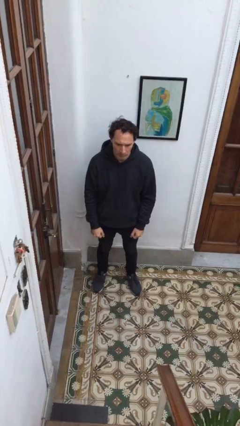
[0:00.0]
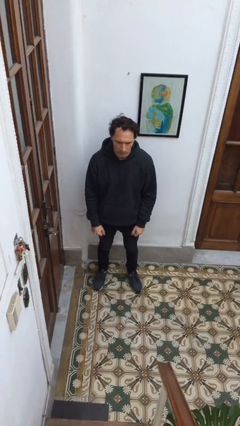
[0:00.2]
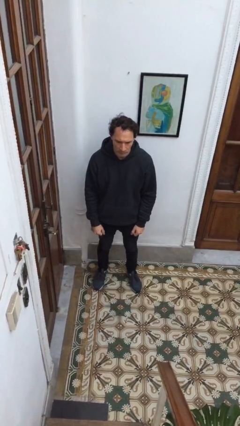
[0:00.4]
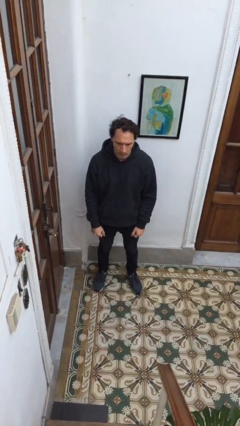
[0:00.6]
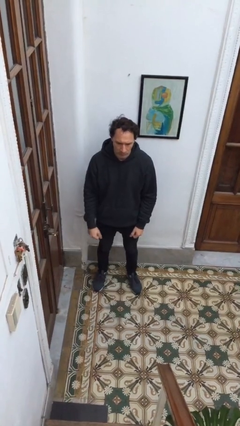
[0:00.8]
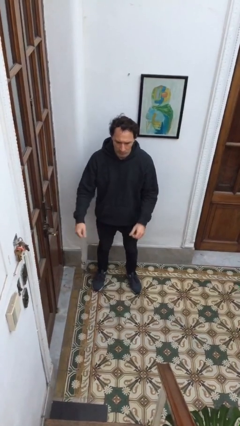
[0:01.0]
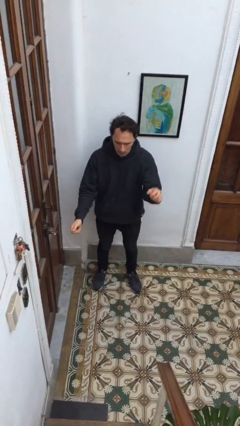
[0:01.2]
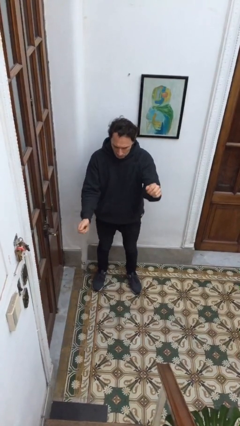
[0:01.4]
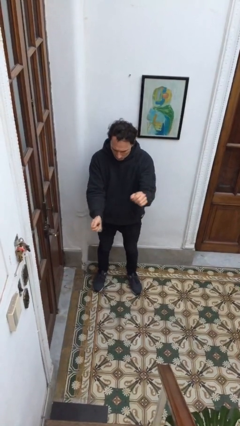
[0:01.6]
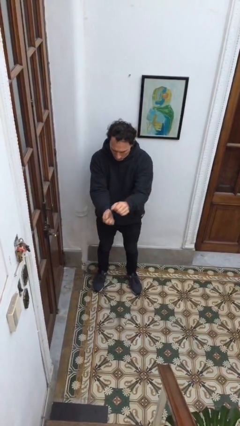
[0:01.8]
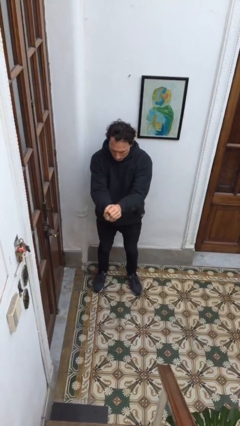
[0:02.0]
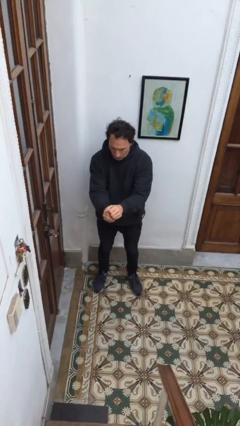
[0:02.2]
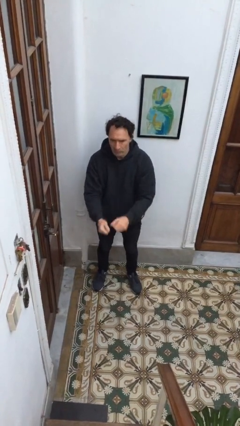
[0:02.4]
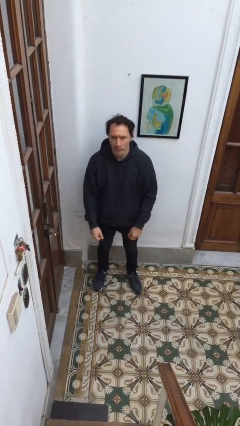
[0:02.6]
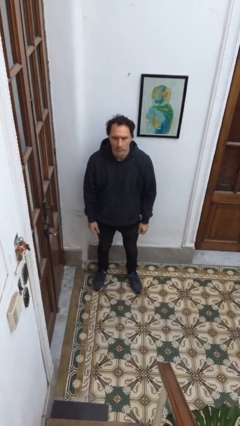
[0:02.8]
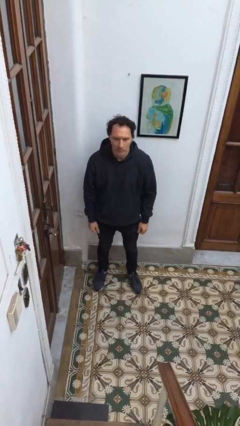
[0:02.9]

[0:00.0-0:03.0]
person gestures zoom out

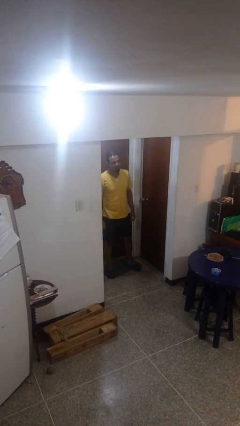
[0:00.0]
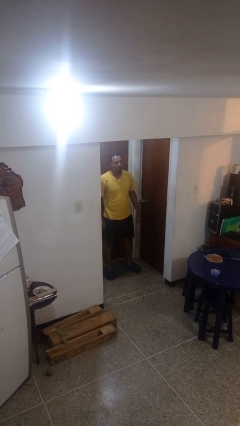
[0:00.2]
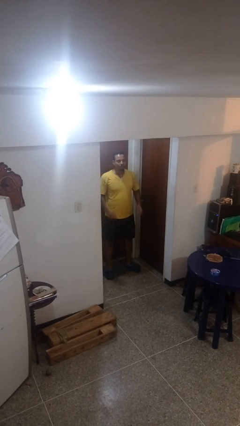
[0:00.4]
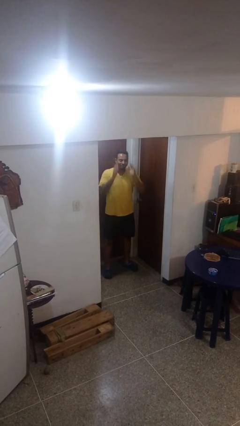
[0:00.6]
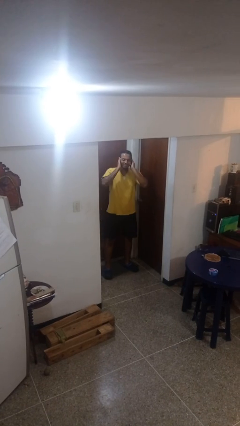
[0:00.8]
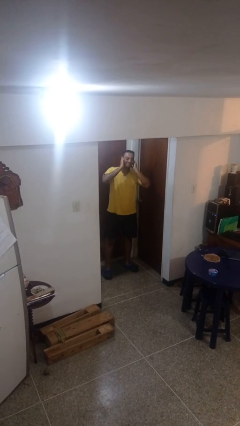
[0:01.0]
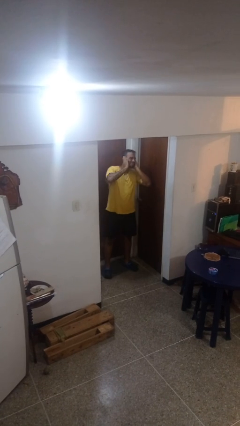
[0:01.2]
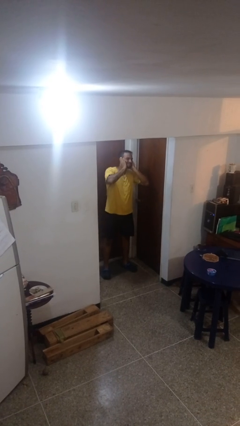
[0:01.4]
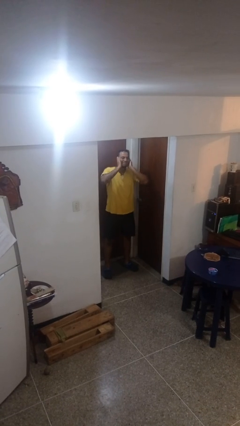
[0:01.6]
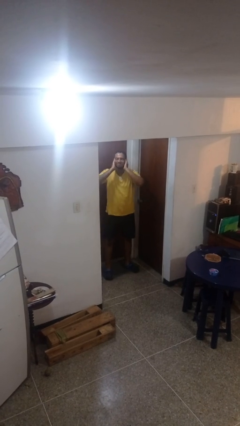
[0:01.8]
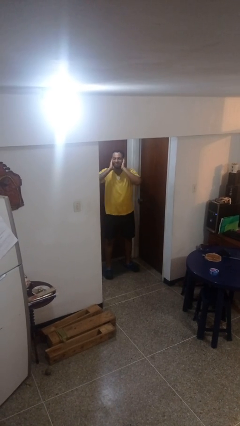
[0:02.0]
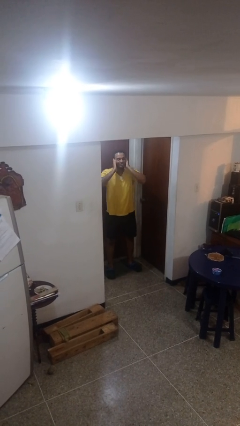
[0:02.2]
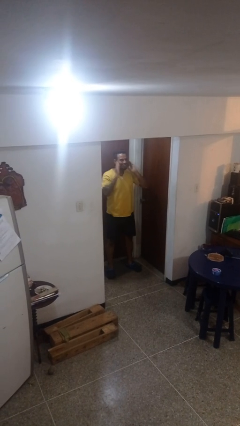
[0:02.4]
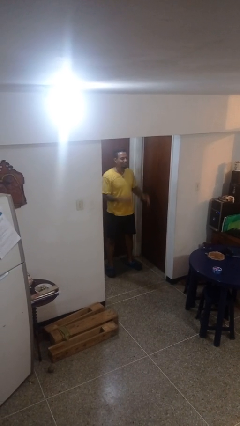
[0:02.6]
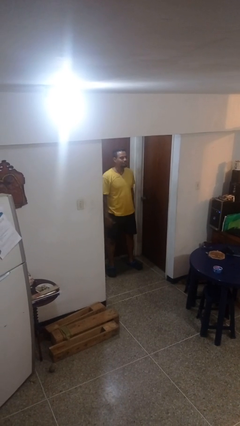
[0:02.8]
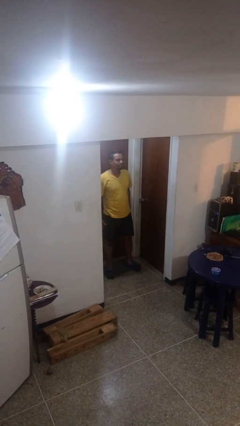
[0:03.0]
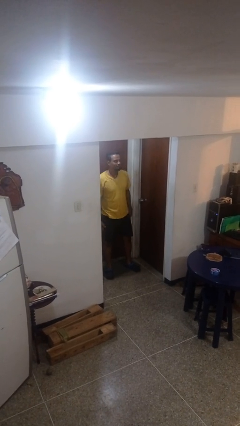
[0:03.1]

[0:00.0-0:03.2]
person puts fingers in ear

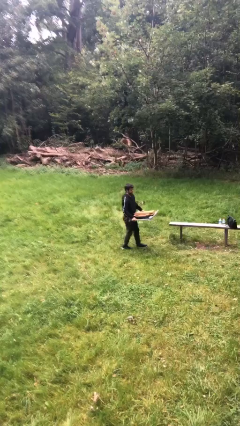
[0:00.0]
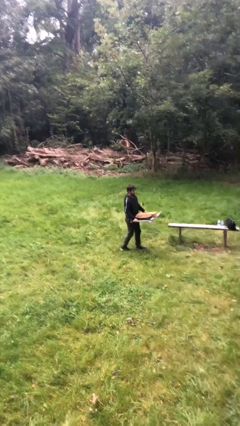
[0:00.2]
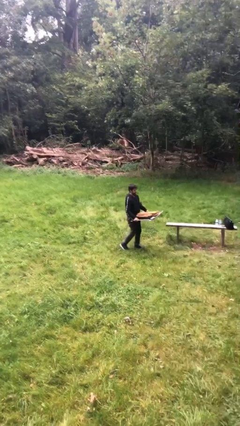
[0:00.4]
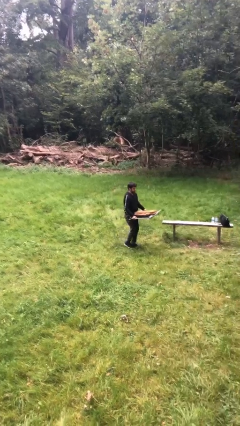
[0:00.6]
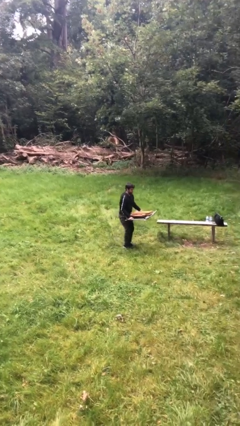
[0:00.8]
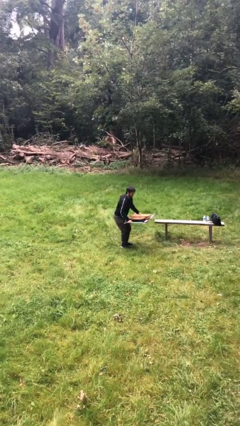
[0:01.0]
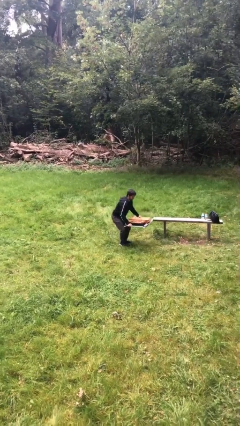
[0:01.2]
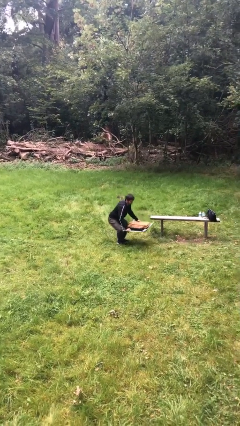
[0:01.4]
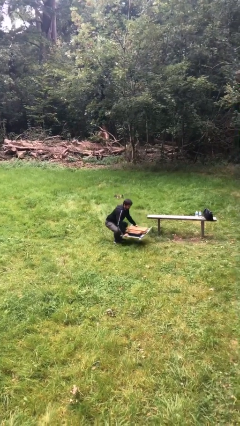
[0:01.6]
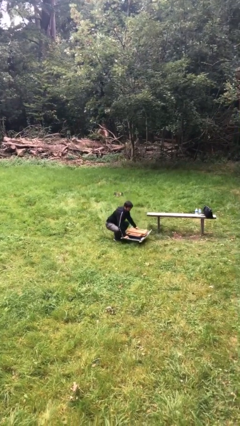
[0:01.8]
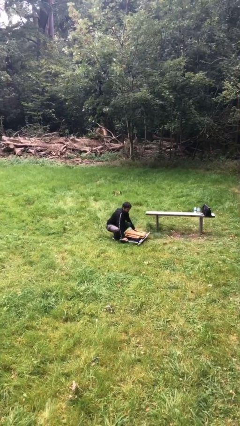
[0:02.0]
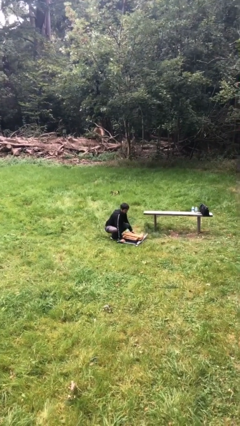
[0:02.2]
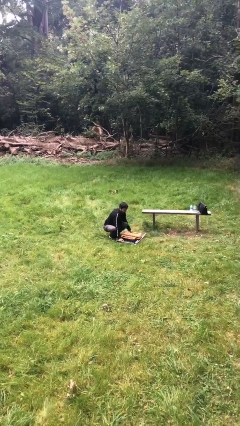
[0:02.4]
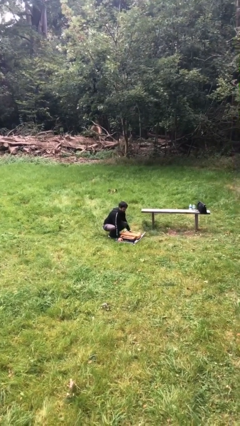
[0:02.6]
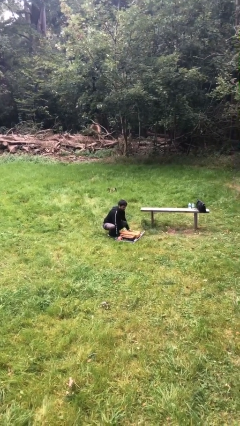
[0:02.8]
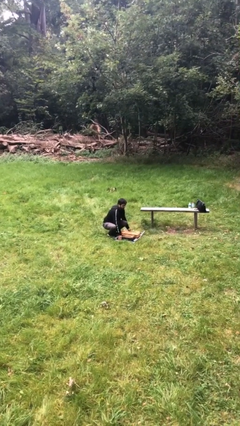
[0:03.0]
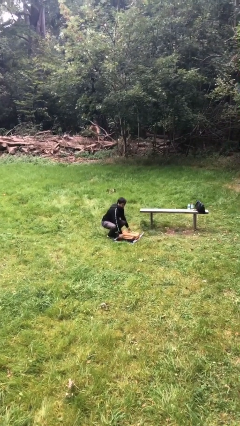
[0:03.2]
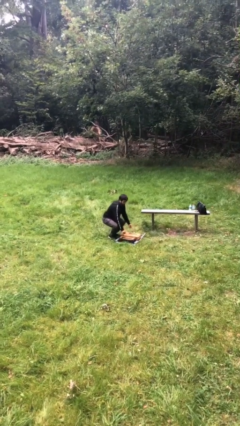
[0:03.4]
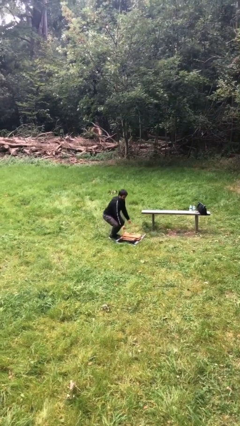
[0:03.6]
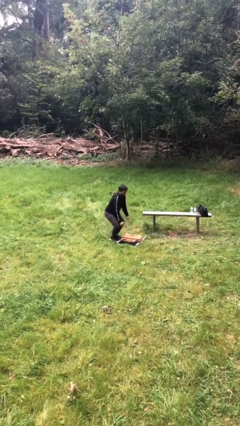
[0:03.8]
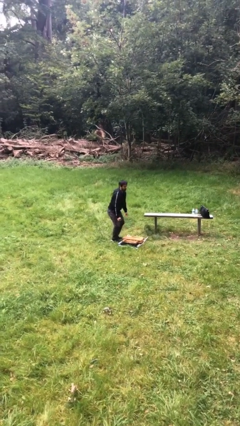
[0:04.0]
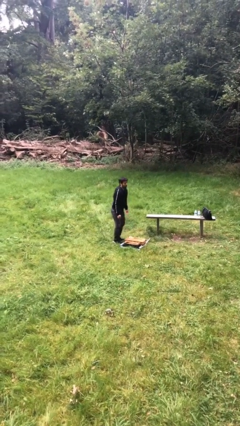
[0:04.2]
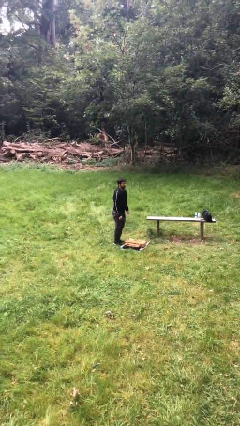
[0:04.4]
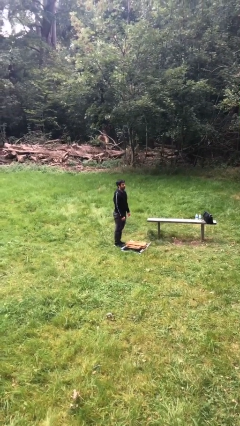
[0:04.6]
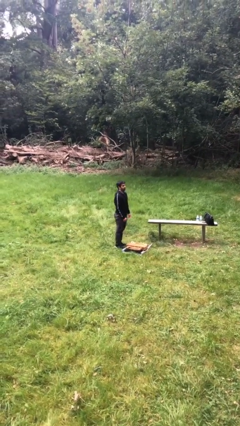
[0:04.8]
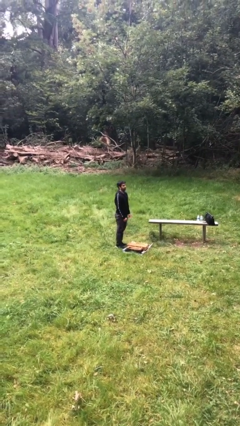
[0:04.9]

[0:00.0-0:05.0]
person puts down object on floor

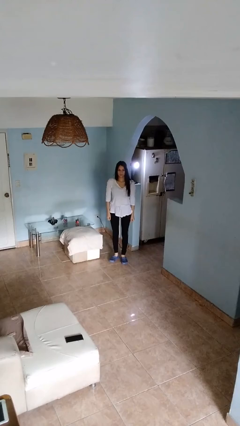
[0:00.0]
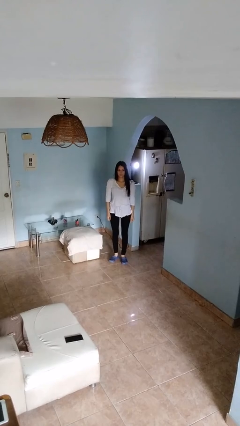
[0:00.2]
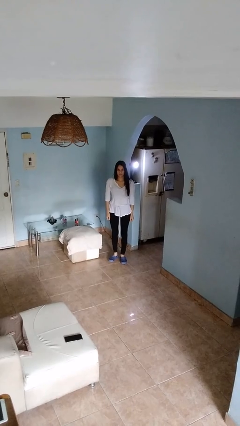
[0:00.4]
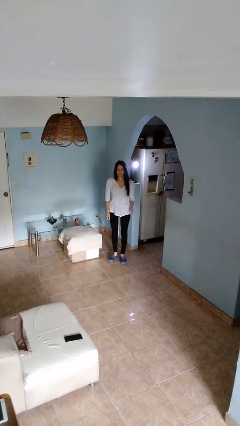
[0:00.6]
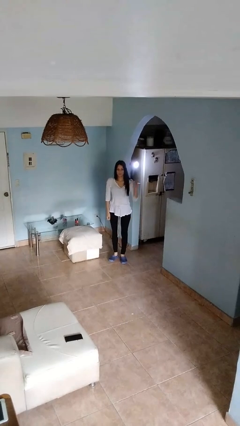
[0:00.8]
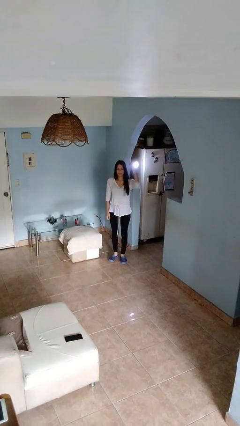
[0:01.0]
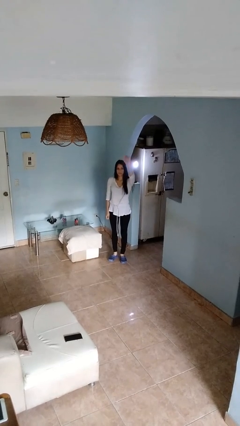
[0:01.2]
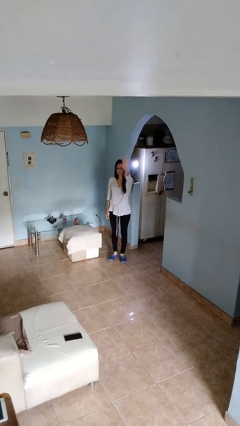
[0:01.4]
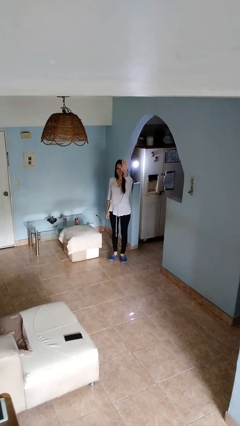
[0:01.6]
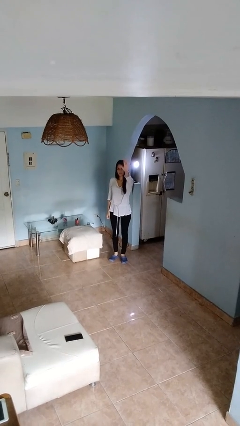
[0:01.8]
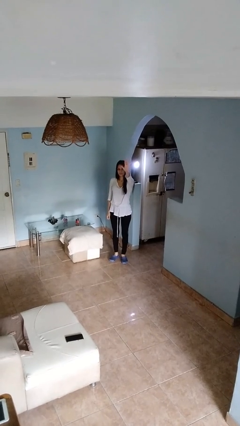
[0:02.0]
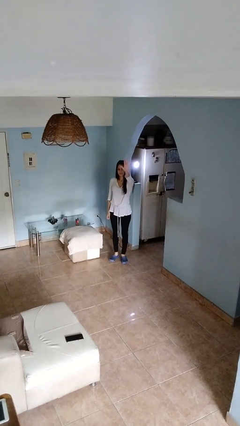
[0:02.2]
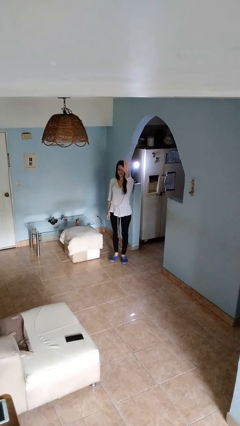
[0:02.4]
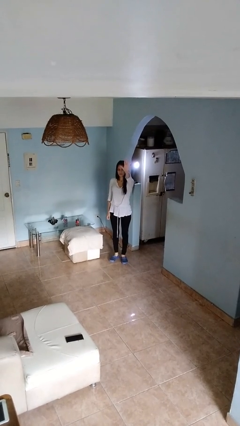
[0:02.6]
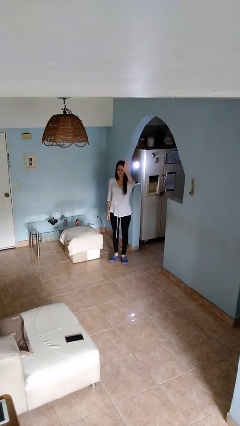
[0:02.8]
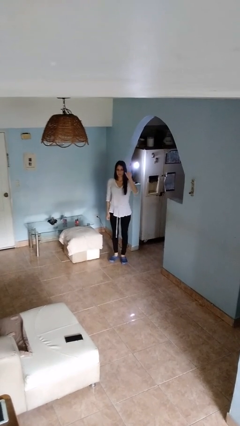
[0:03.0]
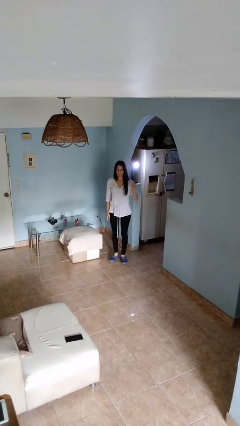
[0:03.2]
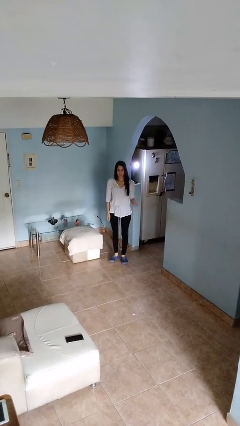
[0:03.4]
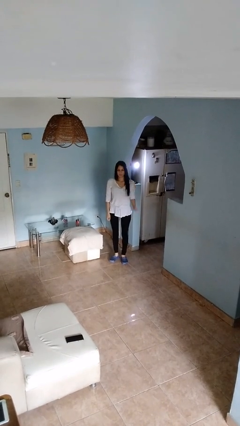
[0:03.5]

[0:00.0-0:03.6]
person gestures number five

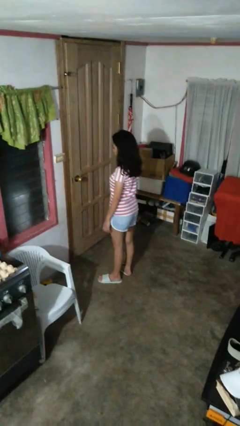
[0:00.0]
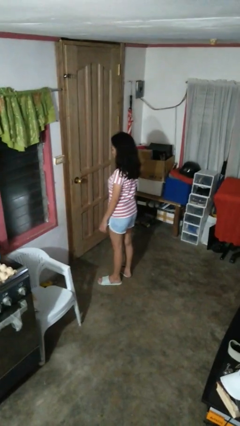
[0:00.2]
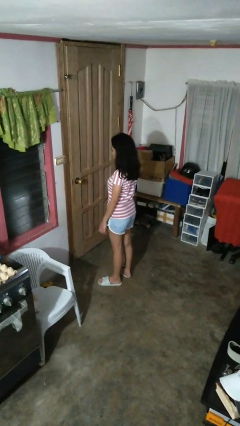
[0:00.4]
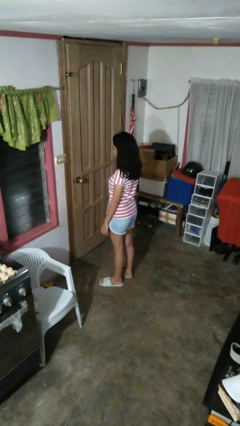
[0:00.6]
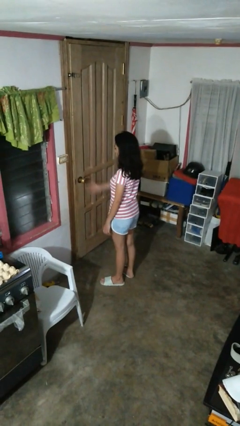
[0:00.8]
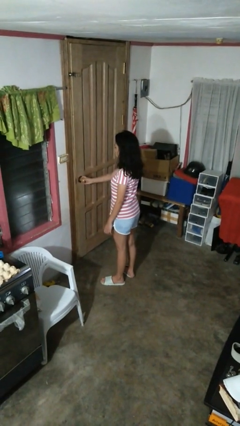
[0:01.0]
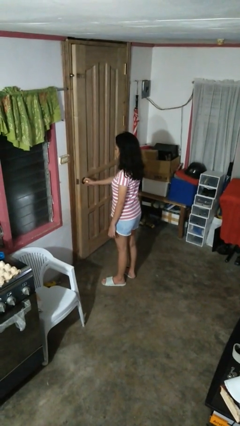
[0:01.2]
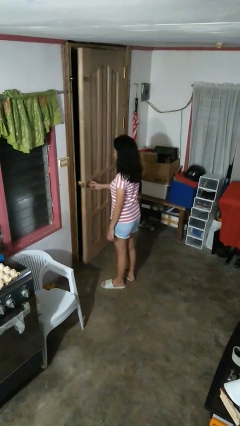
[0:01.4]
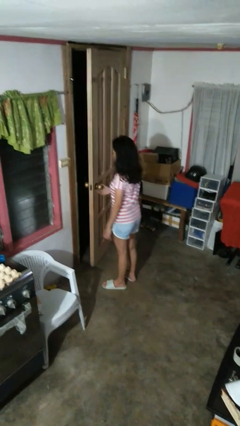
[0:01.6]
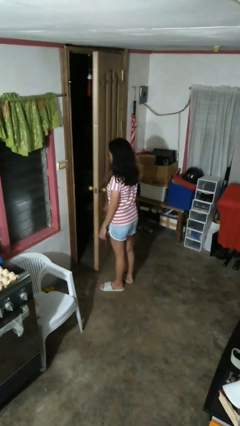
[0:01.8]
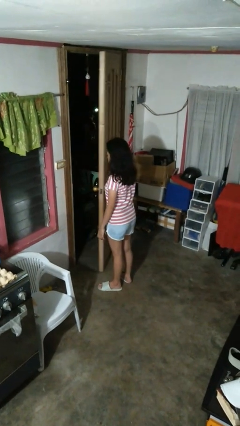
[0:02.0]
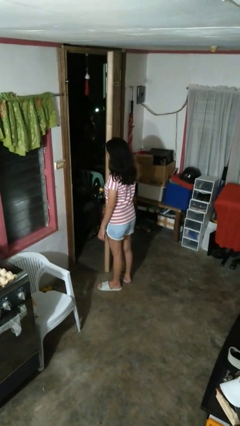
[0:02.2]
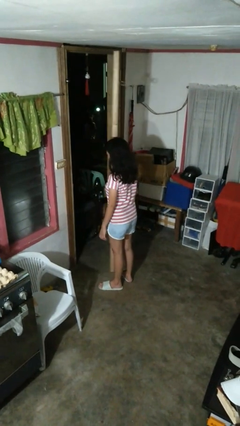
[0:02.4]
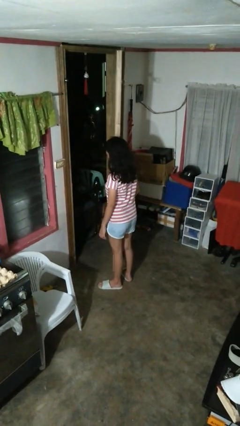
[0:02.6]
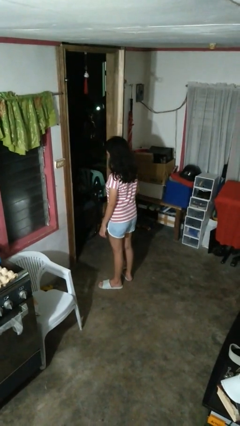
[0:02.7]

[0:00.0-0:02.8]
person opens facility door

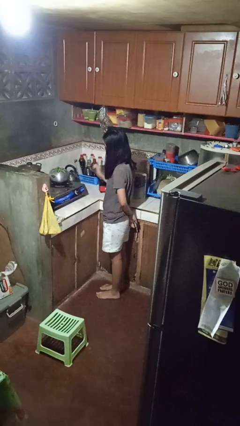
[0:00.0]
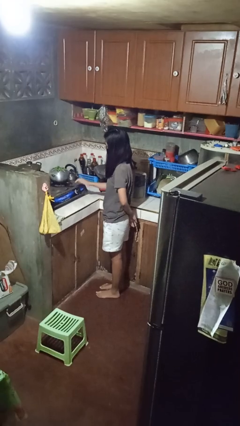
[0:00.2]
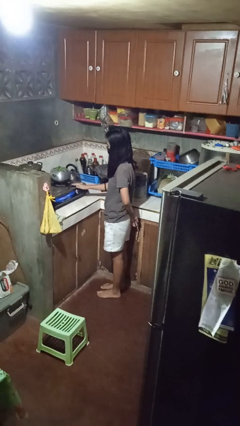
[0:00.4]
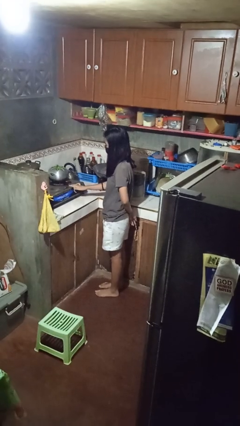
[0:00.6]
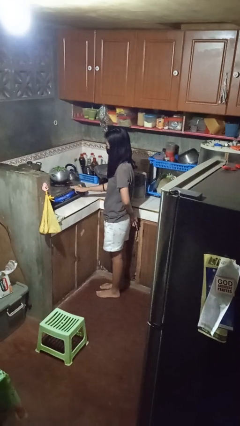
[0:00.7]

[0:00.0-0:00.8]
person burns hand
